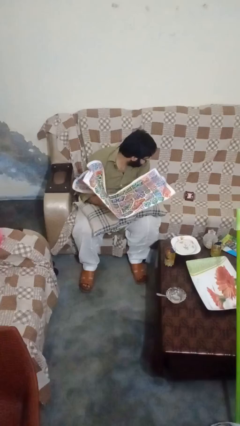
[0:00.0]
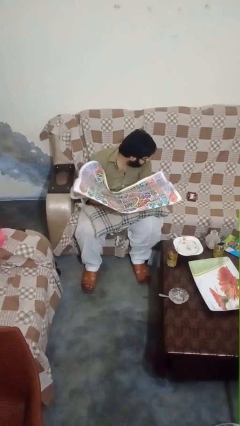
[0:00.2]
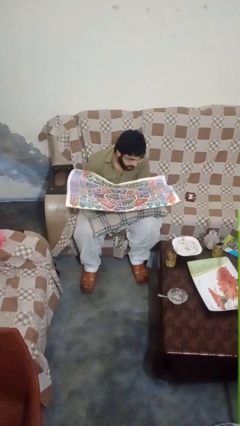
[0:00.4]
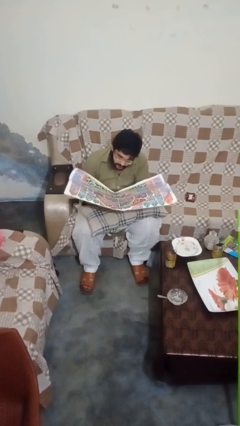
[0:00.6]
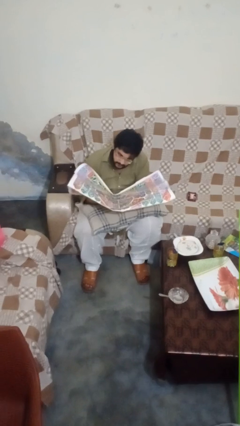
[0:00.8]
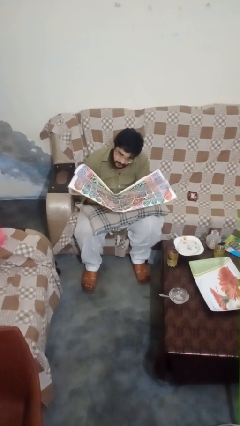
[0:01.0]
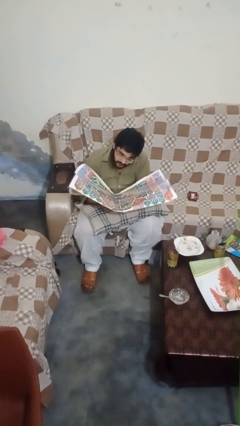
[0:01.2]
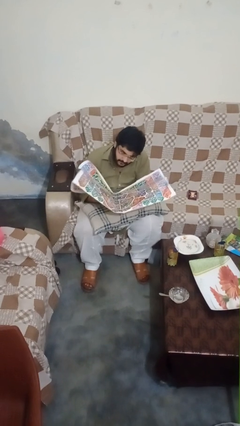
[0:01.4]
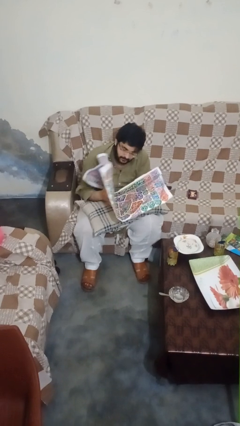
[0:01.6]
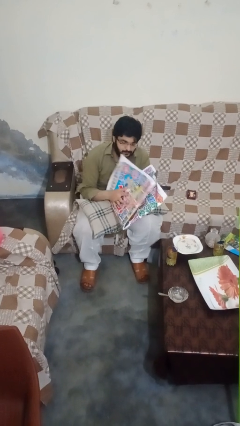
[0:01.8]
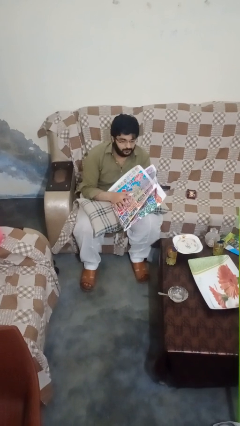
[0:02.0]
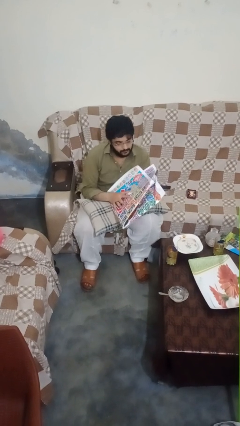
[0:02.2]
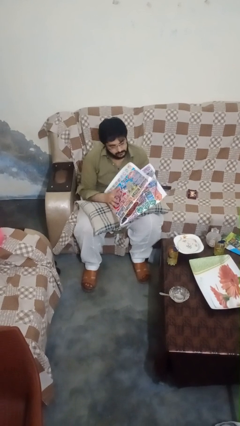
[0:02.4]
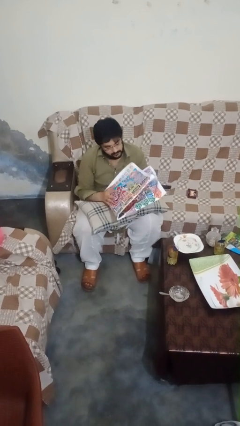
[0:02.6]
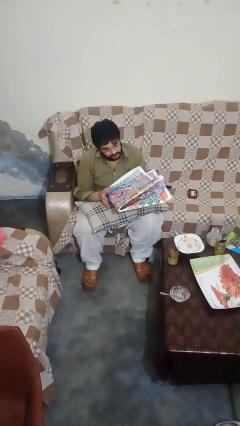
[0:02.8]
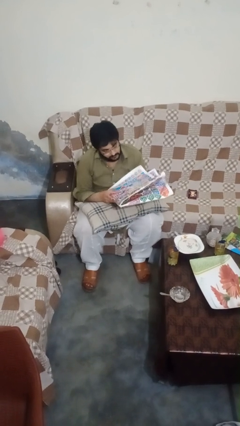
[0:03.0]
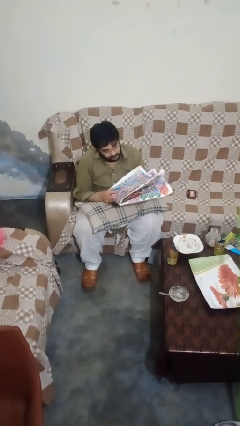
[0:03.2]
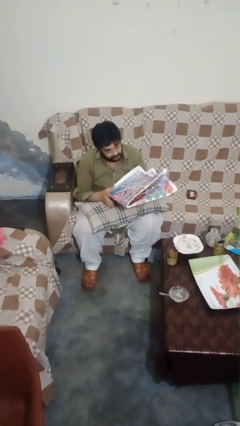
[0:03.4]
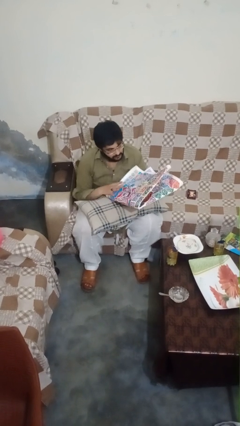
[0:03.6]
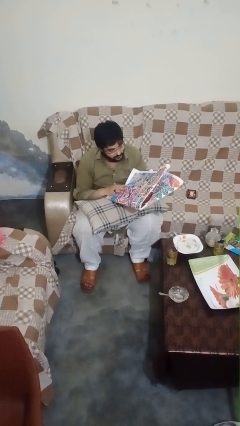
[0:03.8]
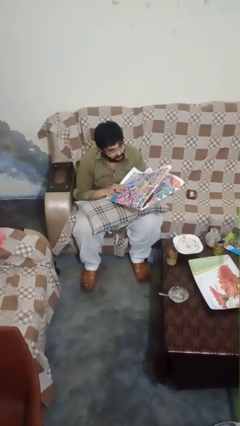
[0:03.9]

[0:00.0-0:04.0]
person reads newspaper

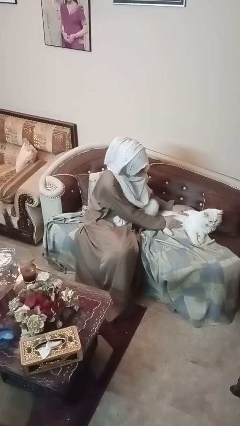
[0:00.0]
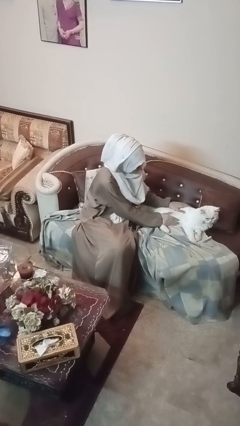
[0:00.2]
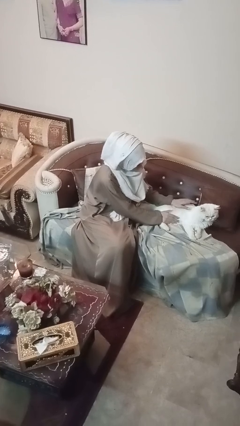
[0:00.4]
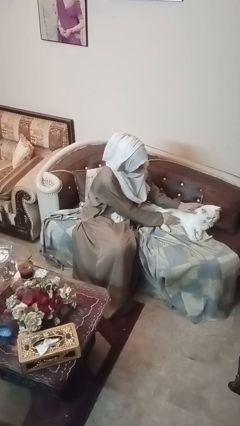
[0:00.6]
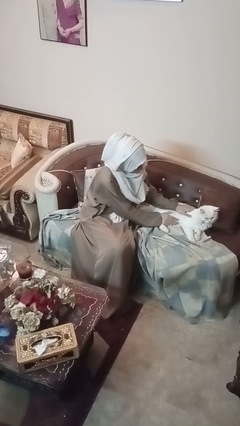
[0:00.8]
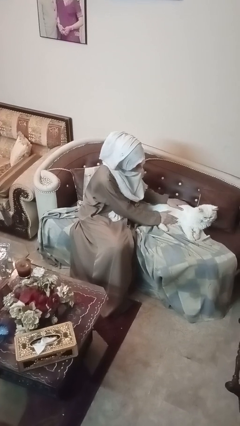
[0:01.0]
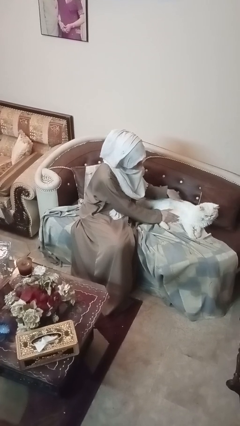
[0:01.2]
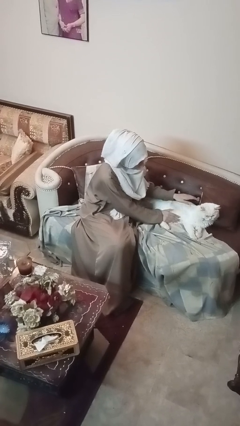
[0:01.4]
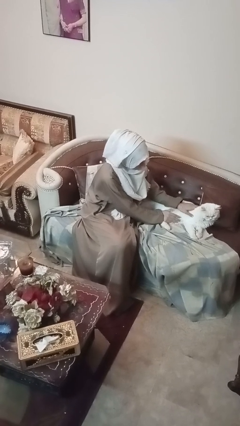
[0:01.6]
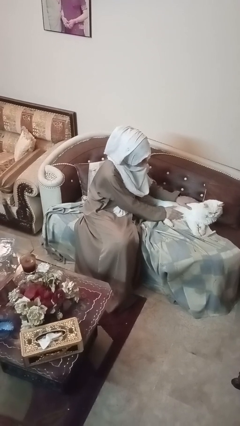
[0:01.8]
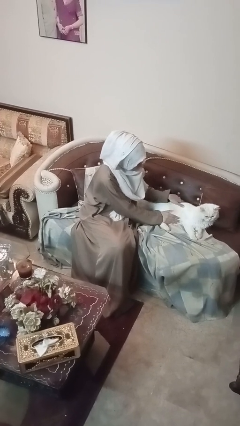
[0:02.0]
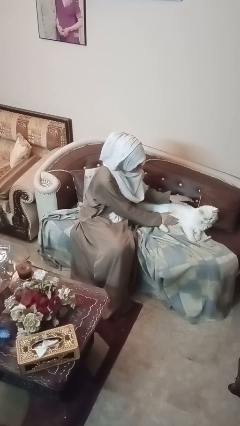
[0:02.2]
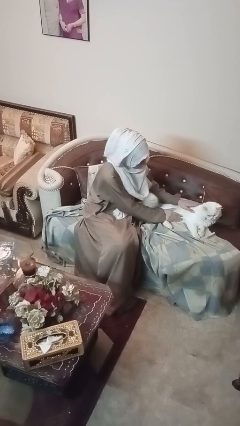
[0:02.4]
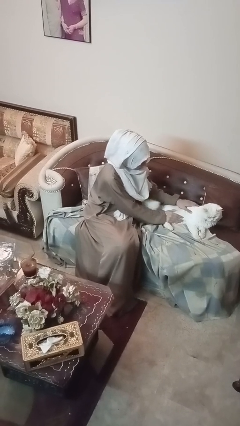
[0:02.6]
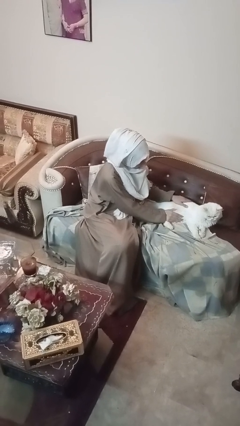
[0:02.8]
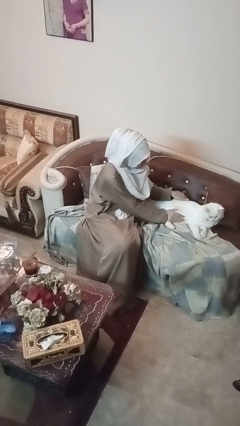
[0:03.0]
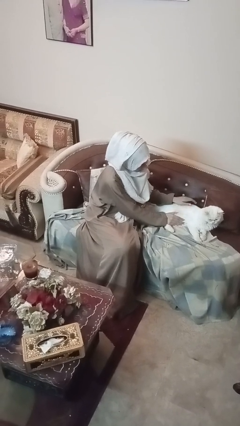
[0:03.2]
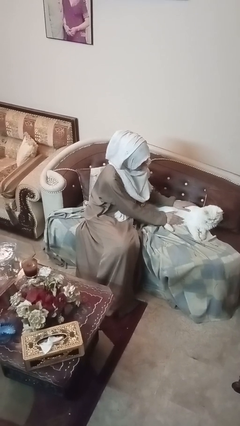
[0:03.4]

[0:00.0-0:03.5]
person pets cat

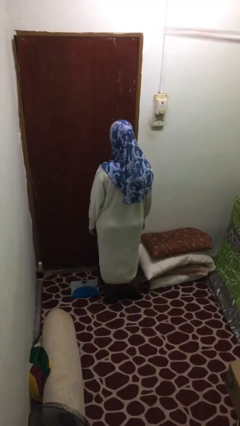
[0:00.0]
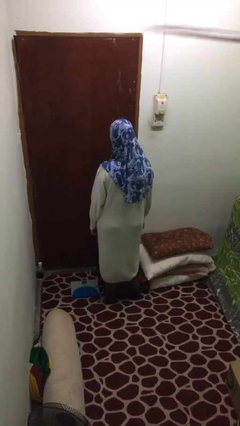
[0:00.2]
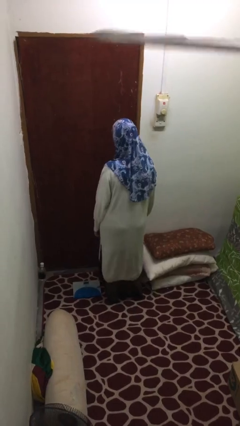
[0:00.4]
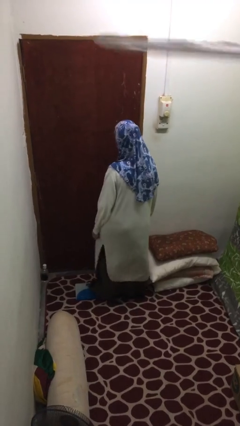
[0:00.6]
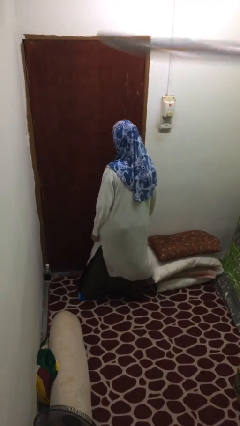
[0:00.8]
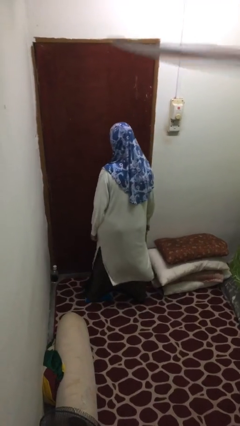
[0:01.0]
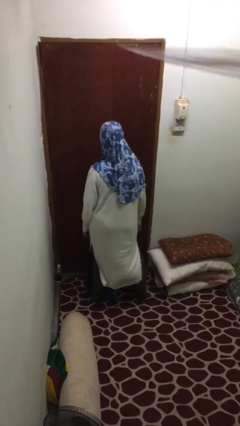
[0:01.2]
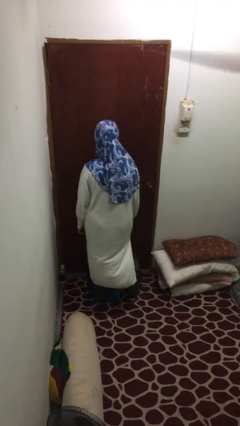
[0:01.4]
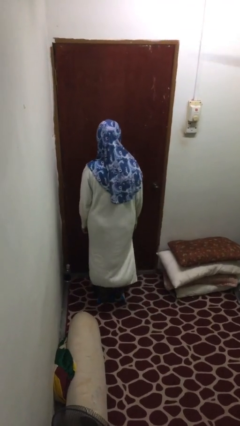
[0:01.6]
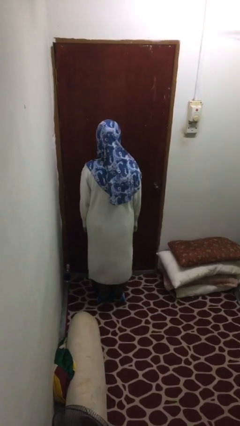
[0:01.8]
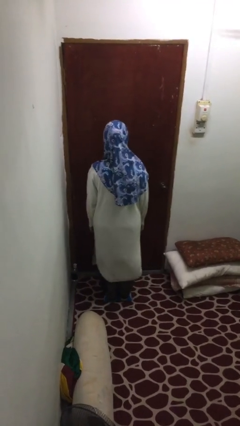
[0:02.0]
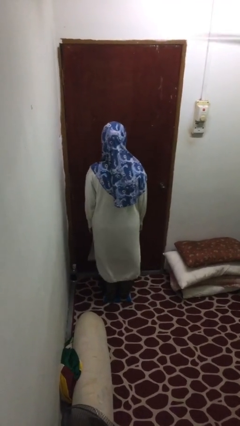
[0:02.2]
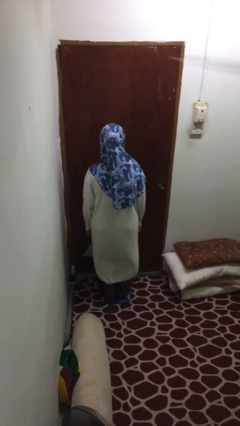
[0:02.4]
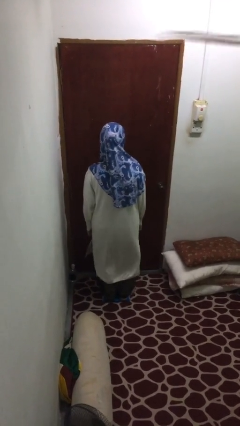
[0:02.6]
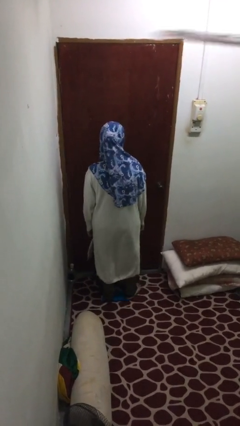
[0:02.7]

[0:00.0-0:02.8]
person uses bodyweight scale

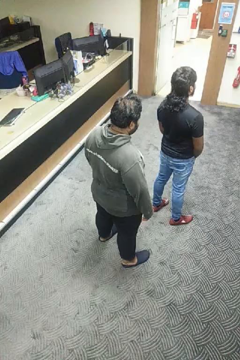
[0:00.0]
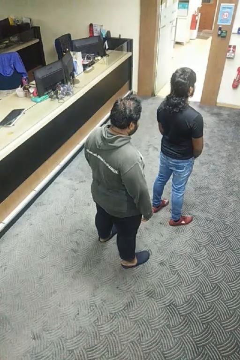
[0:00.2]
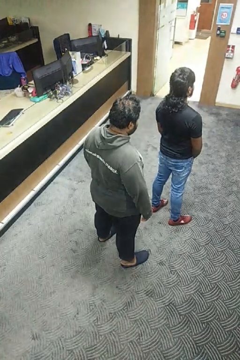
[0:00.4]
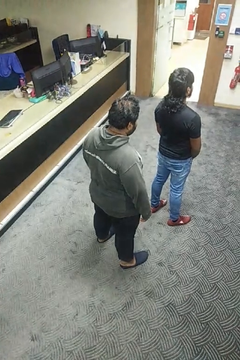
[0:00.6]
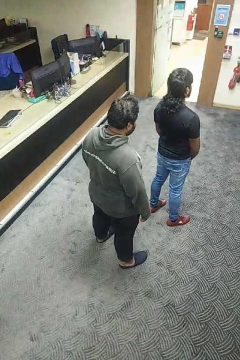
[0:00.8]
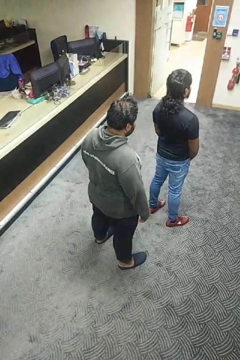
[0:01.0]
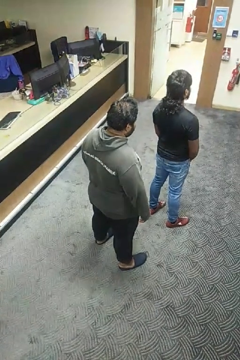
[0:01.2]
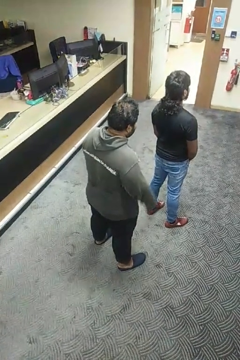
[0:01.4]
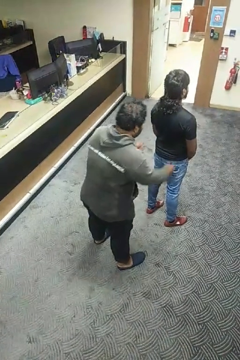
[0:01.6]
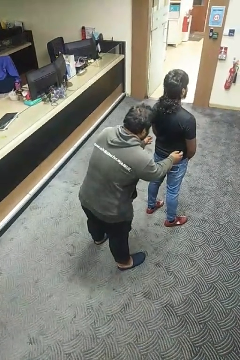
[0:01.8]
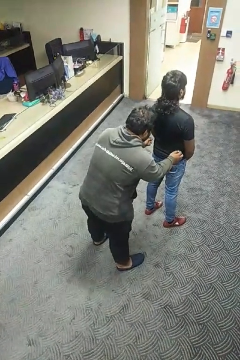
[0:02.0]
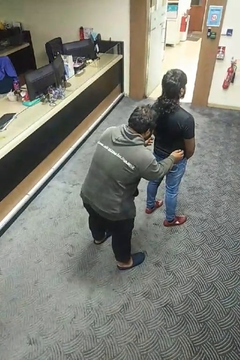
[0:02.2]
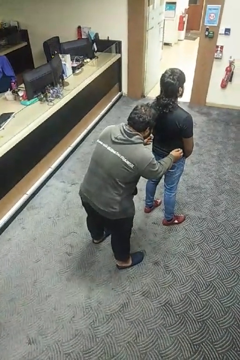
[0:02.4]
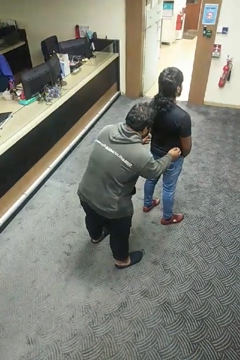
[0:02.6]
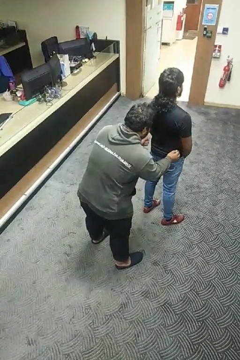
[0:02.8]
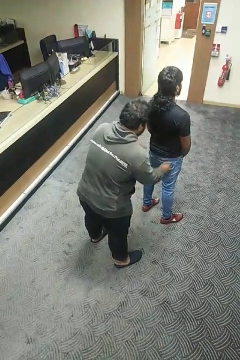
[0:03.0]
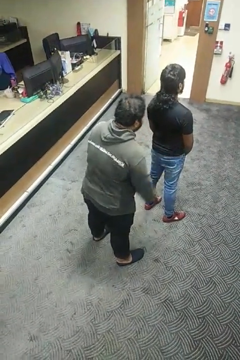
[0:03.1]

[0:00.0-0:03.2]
person tickles person

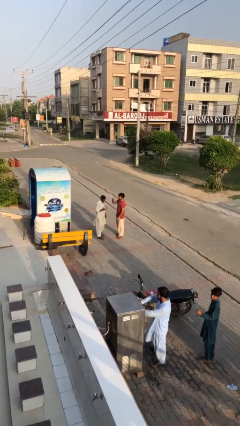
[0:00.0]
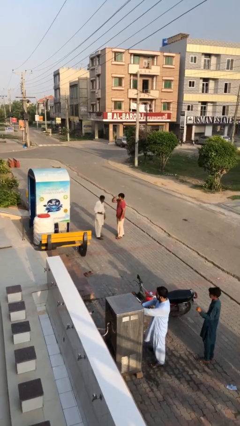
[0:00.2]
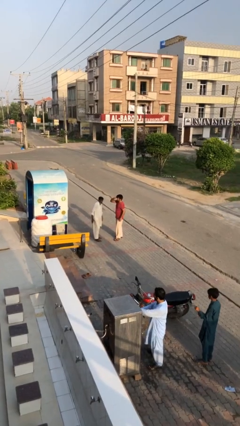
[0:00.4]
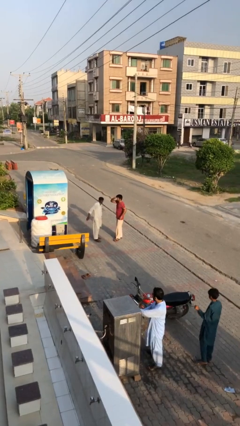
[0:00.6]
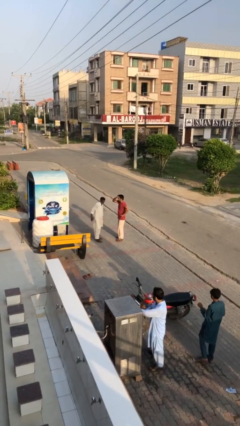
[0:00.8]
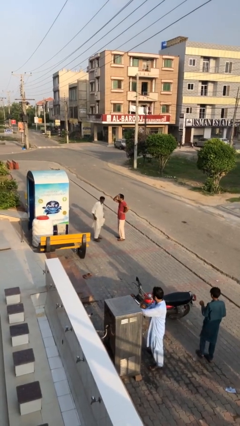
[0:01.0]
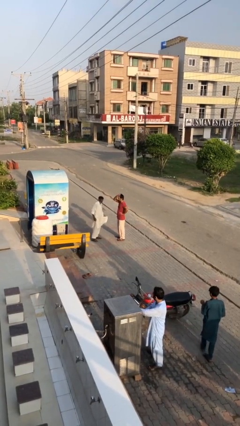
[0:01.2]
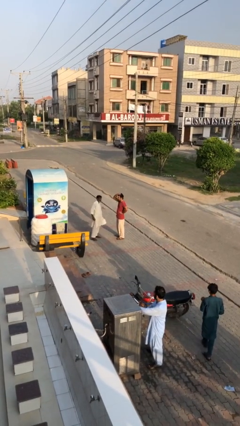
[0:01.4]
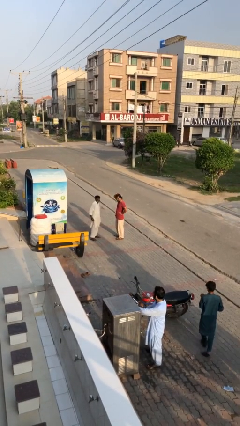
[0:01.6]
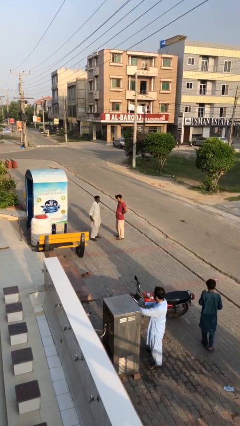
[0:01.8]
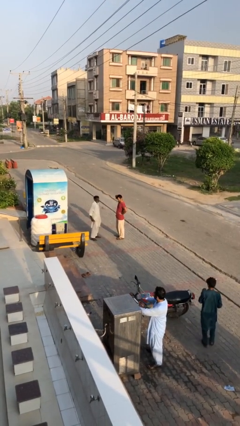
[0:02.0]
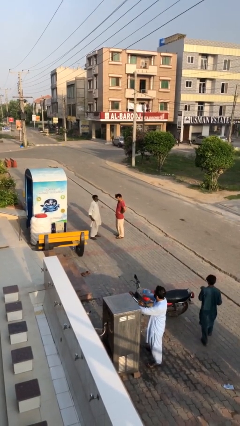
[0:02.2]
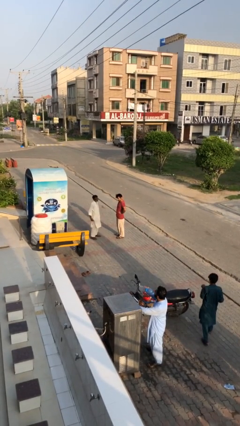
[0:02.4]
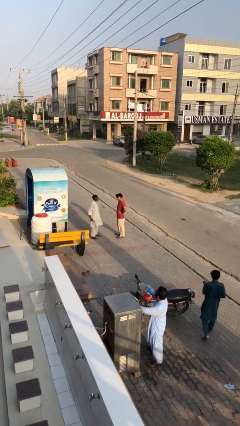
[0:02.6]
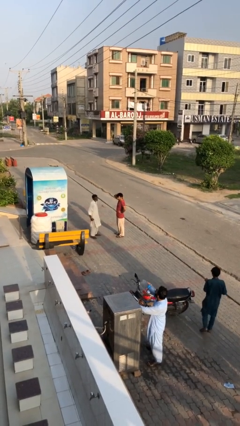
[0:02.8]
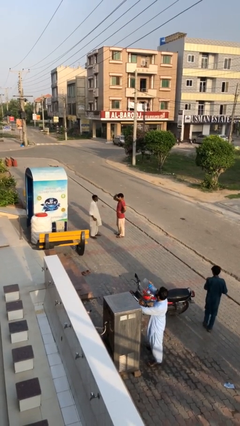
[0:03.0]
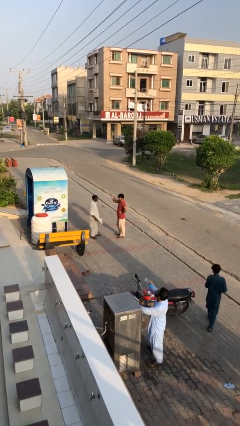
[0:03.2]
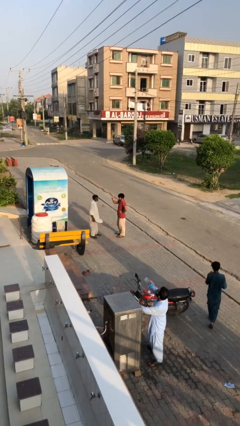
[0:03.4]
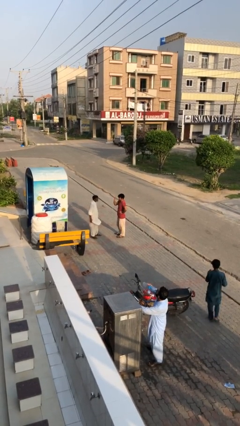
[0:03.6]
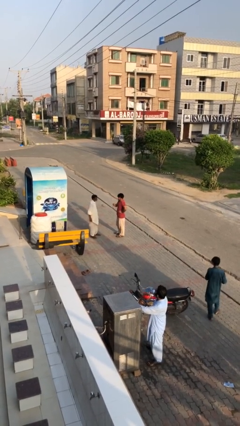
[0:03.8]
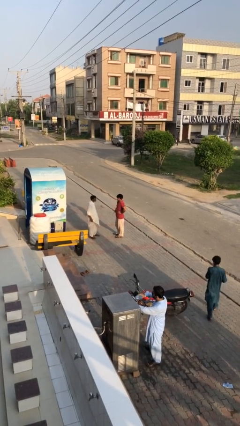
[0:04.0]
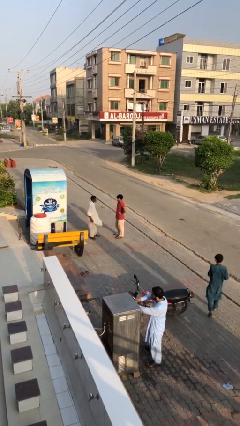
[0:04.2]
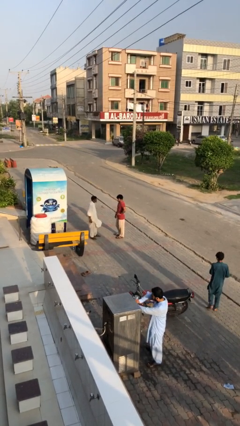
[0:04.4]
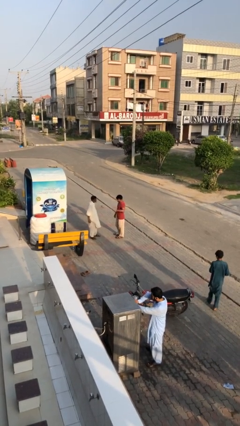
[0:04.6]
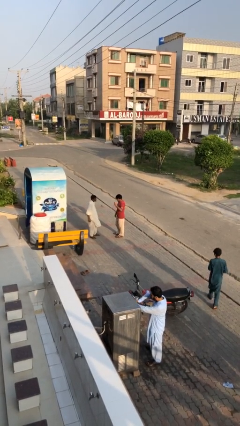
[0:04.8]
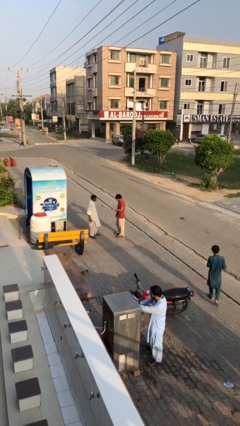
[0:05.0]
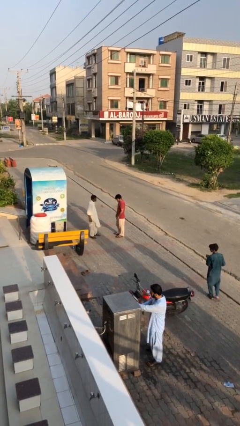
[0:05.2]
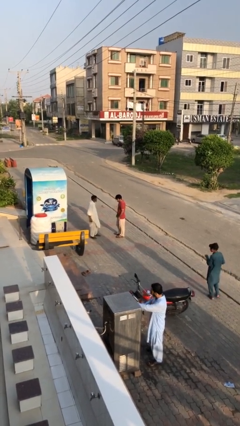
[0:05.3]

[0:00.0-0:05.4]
person talks to person
